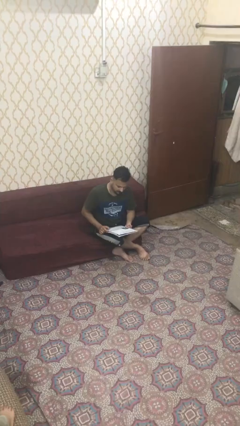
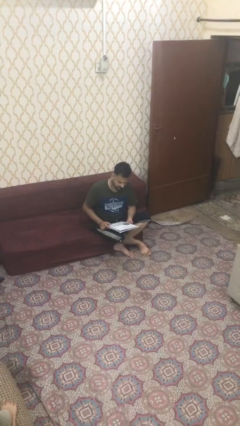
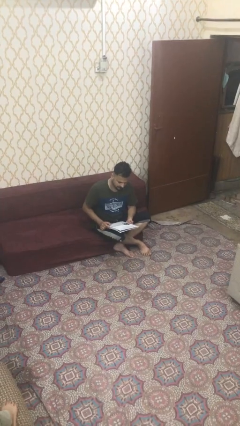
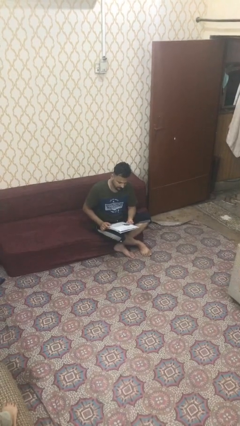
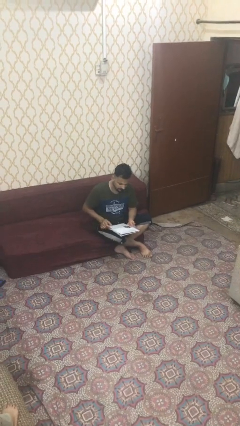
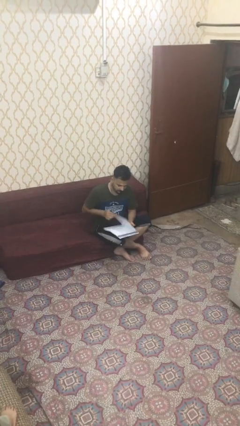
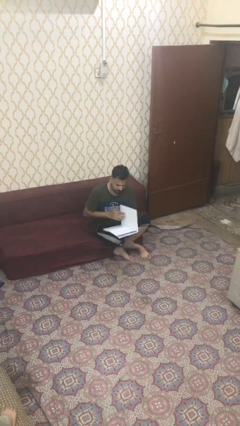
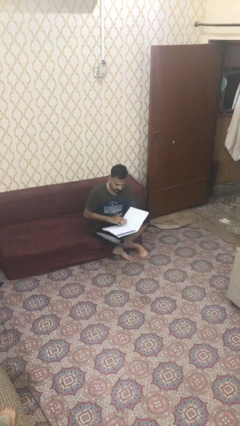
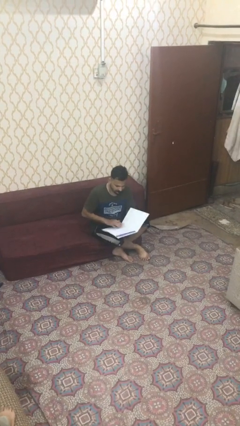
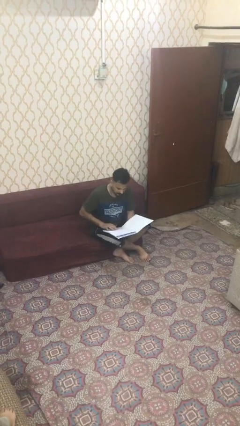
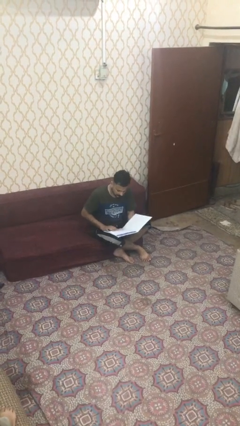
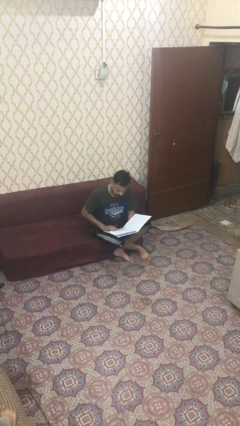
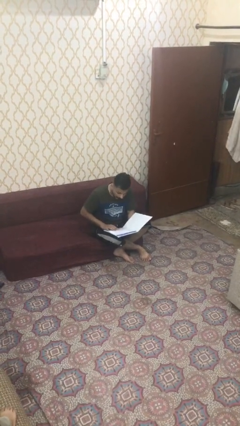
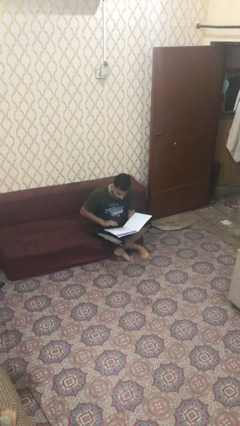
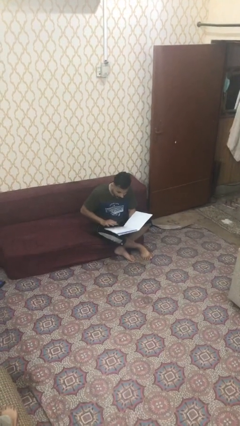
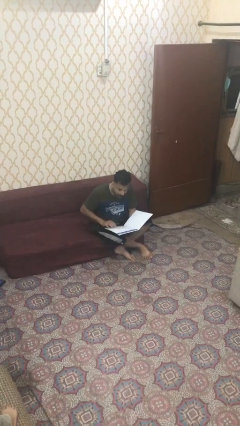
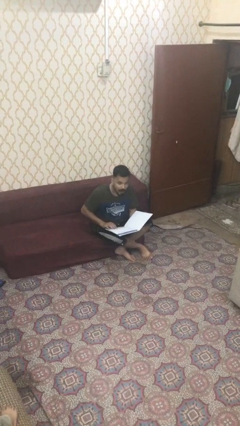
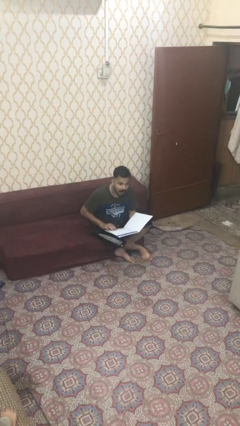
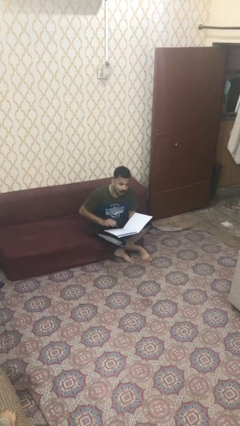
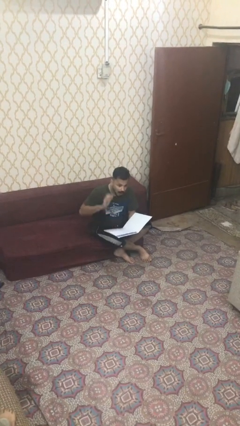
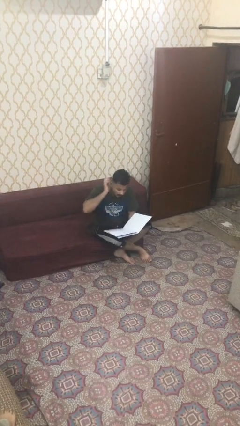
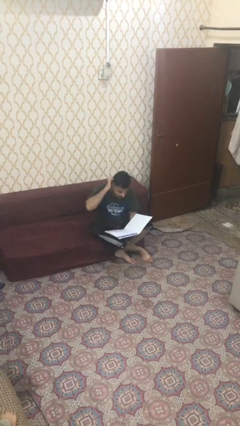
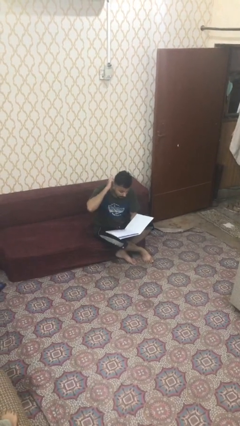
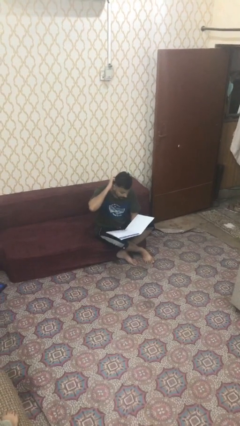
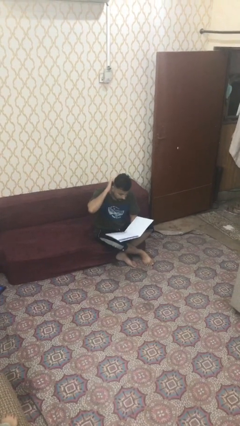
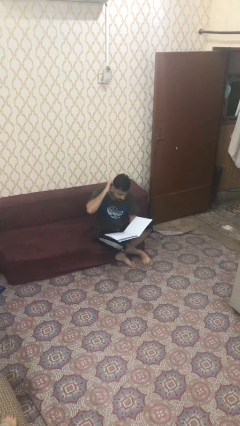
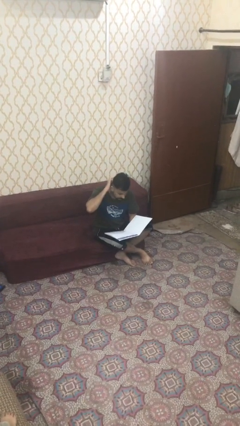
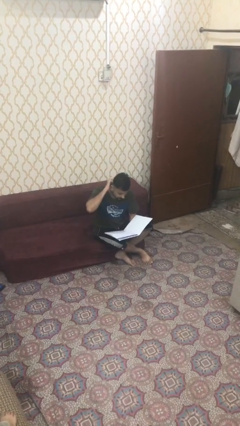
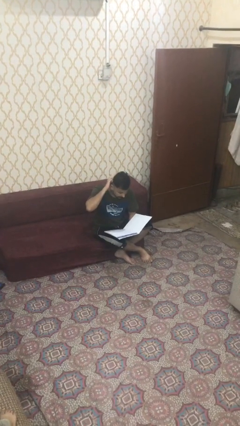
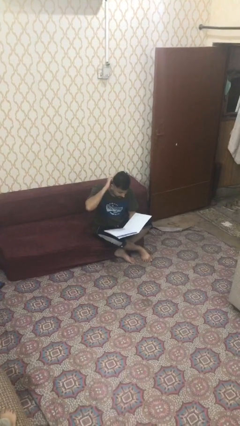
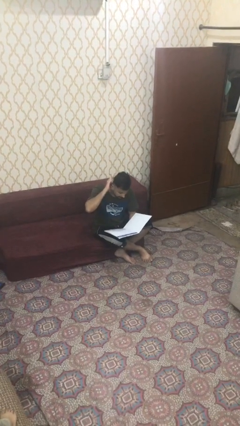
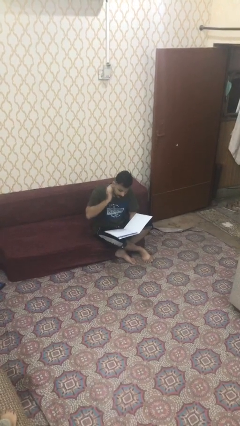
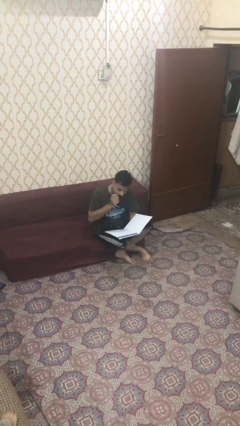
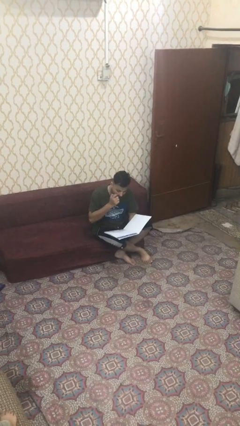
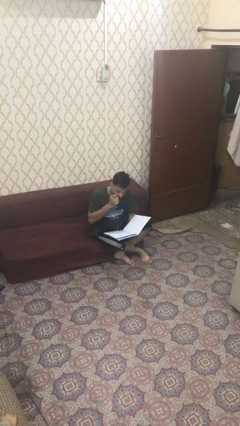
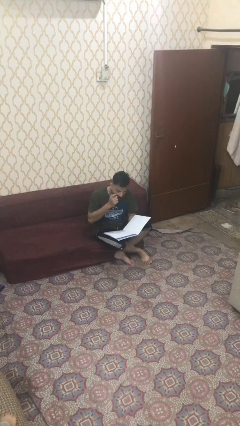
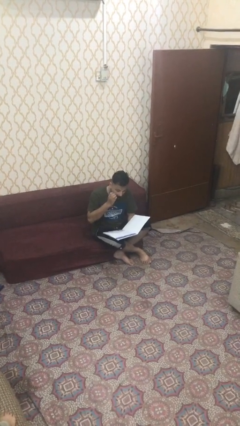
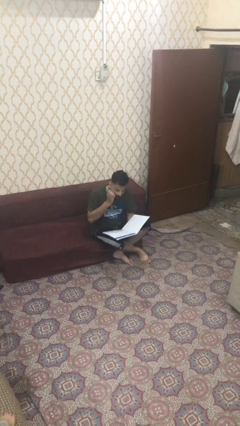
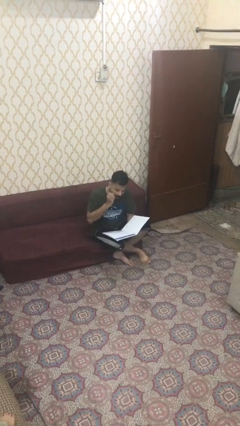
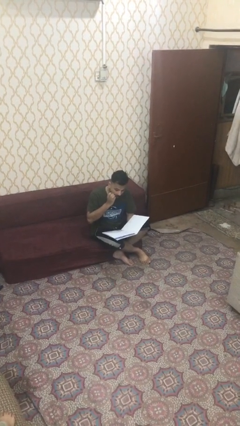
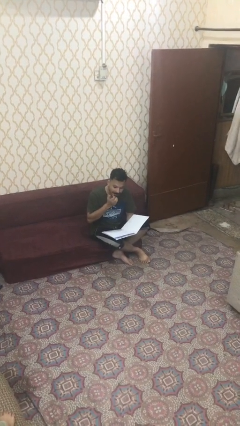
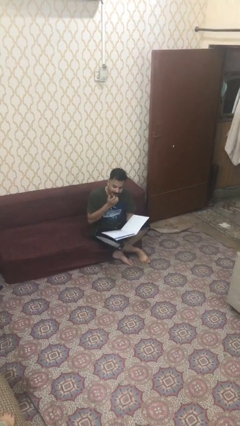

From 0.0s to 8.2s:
person reads document

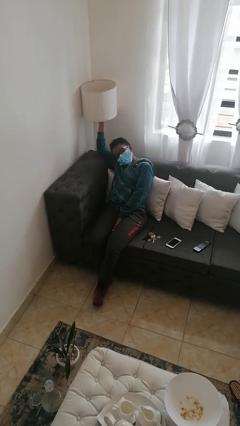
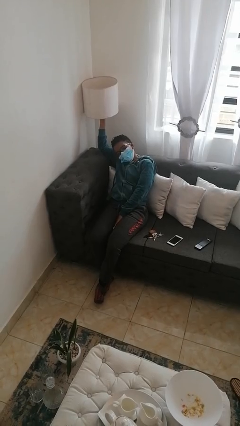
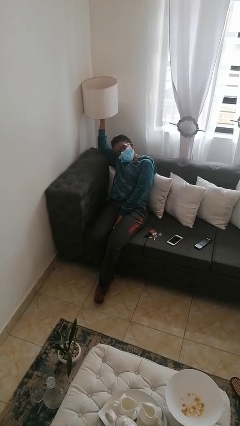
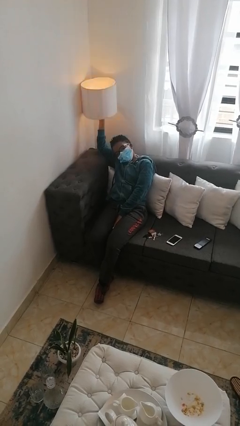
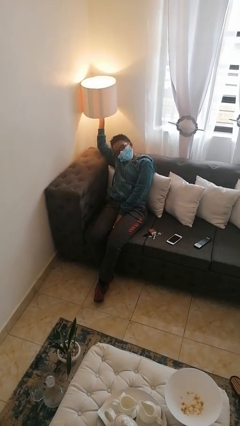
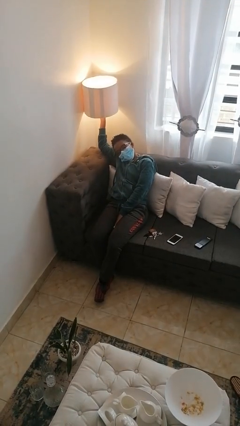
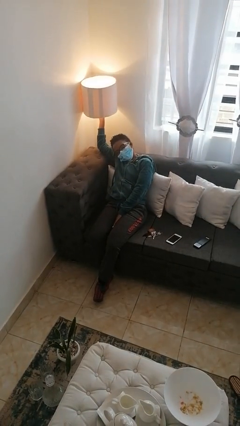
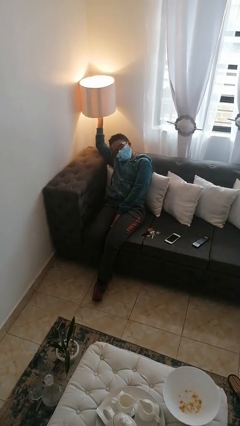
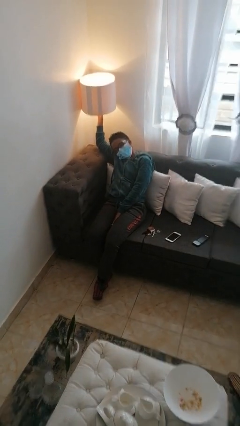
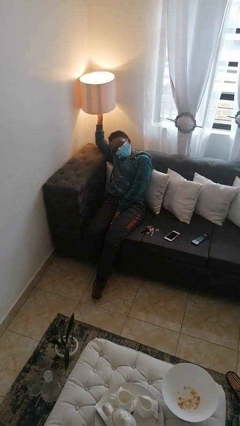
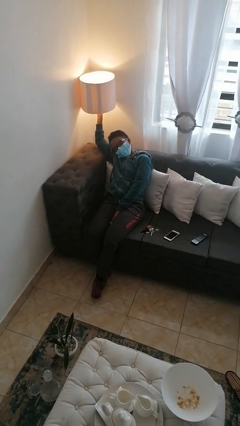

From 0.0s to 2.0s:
person turns on lamp

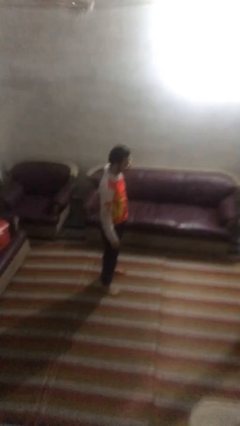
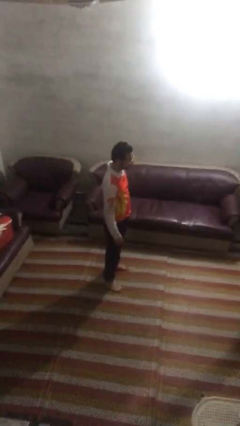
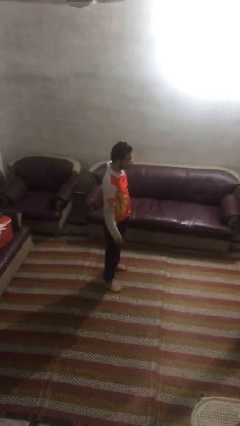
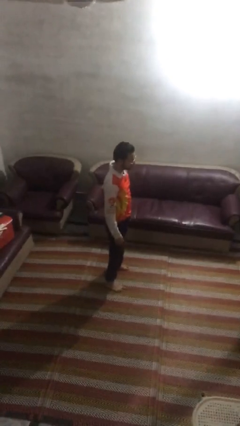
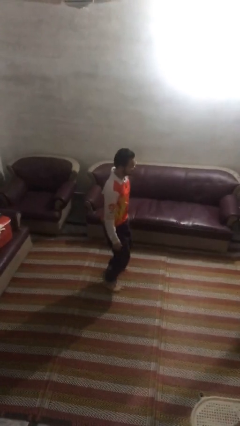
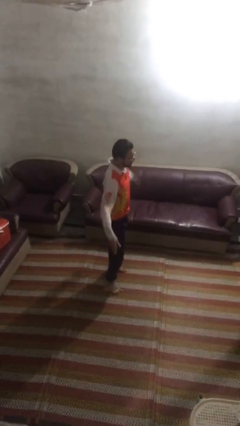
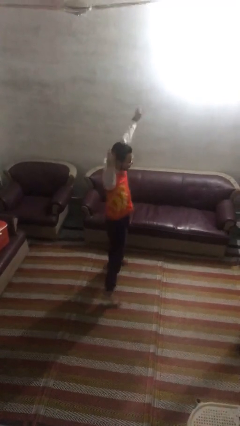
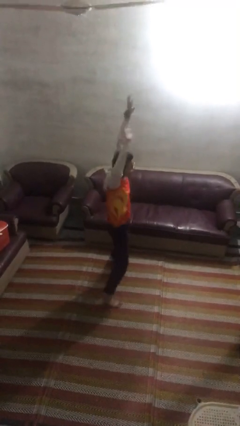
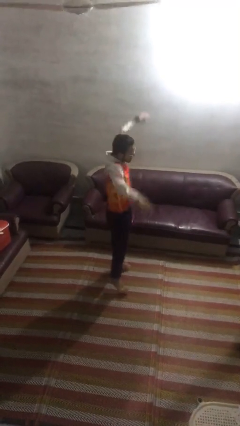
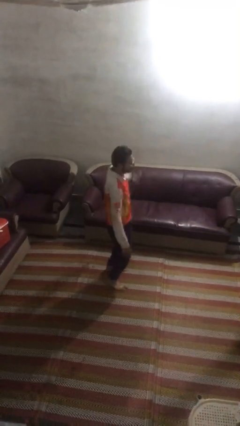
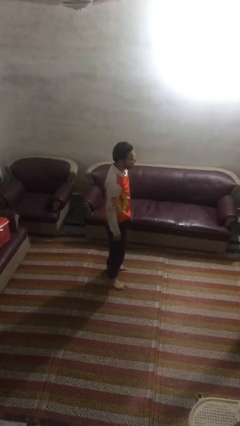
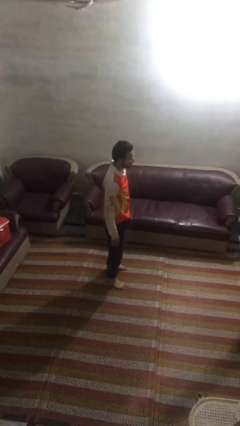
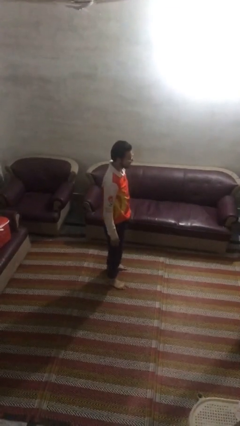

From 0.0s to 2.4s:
person exercises with jumping jacks

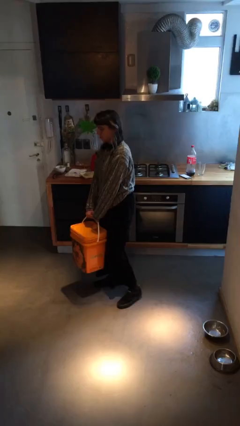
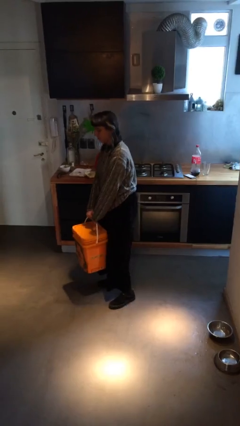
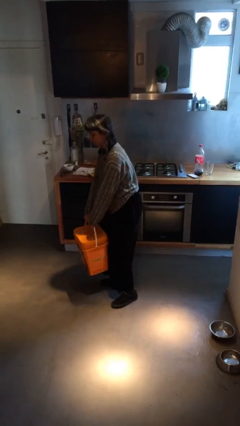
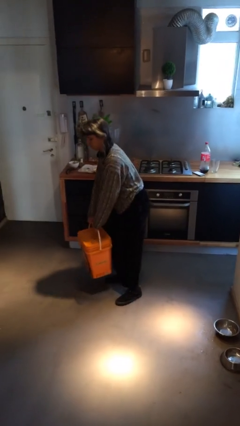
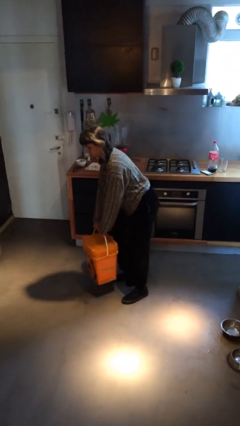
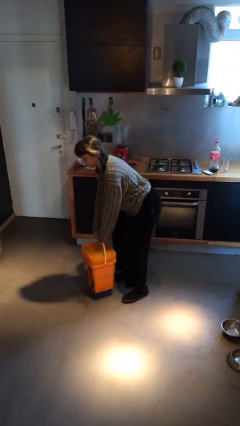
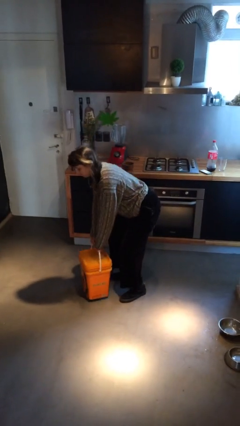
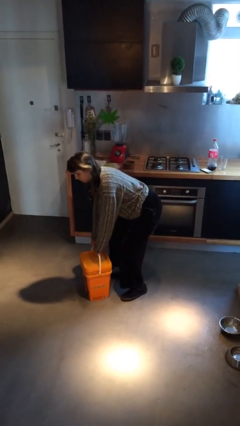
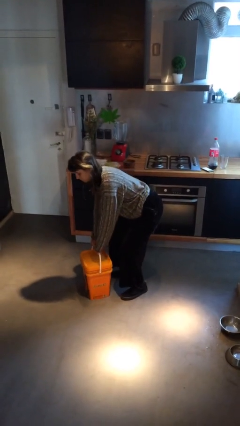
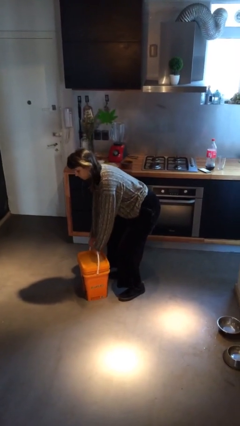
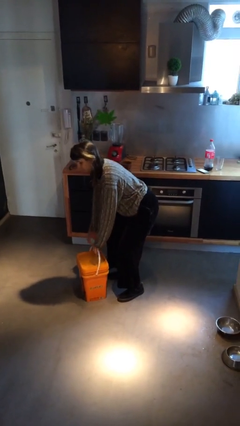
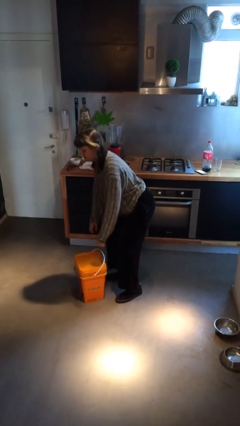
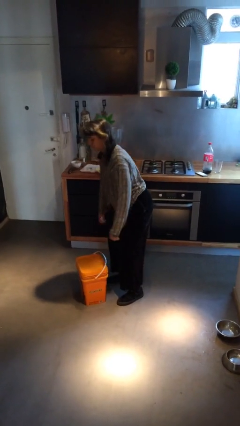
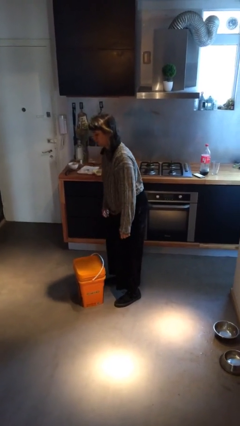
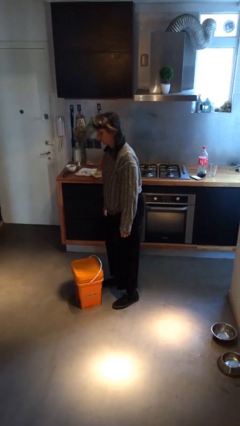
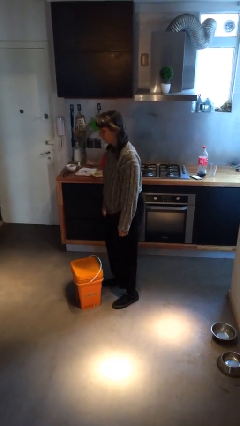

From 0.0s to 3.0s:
person puts down object on floor

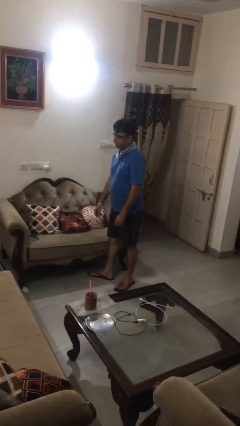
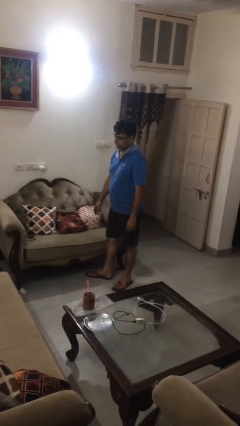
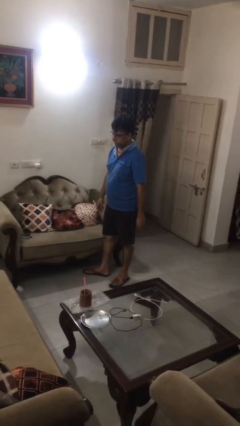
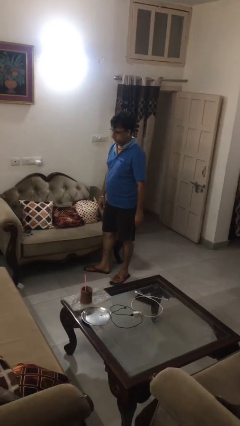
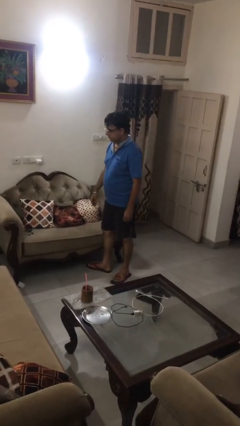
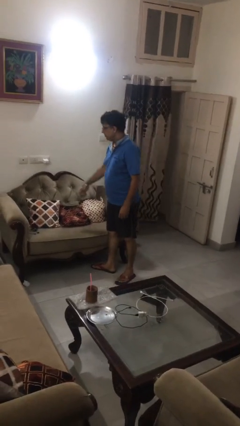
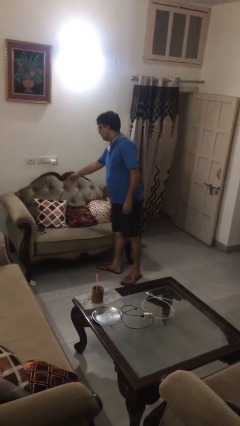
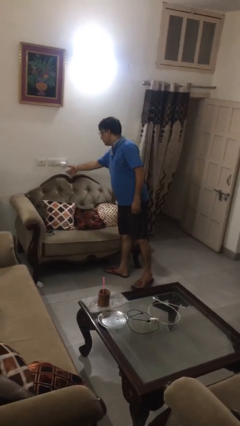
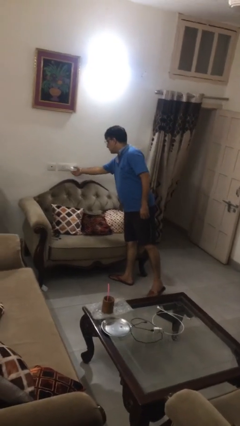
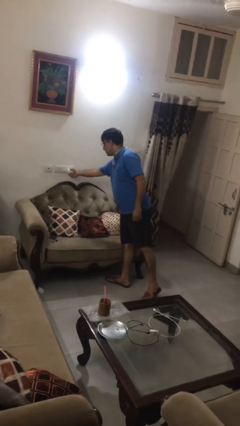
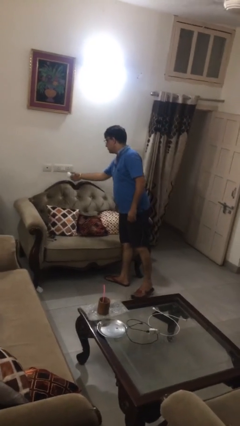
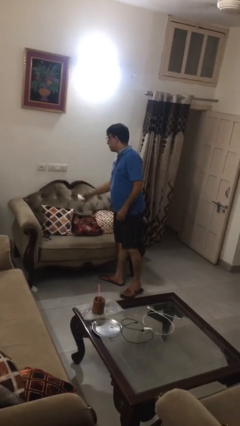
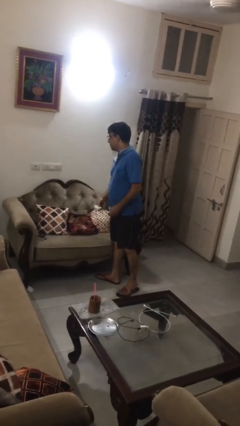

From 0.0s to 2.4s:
person unplugs from electrical socket
